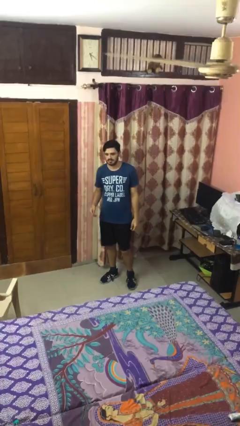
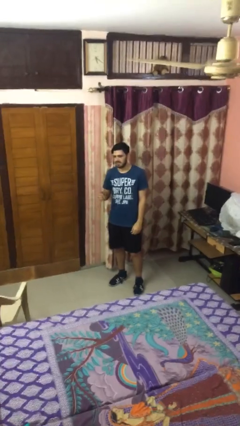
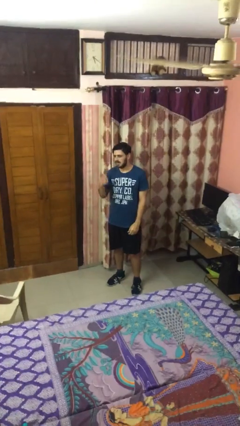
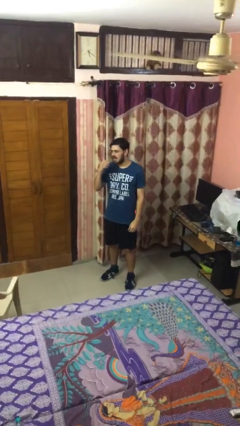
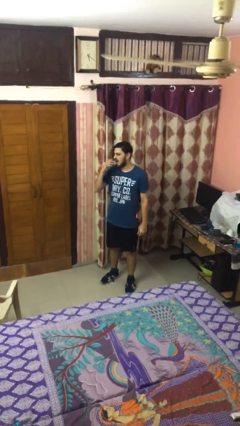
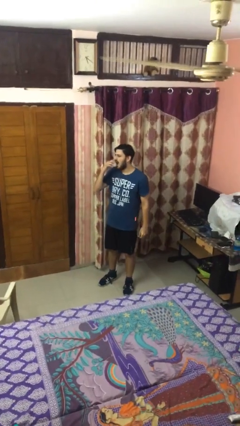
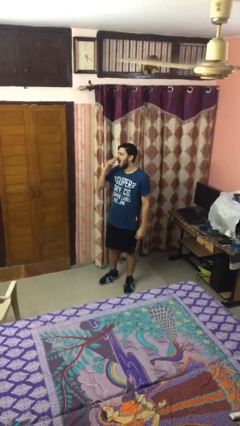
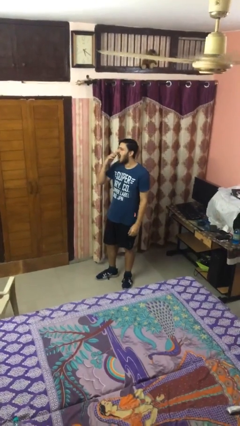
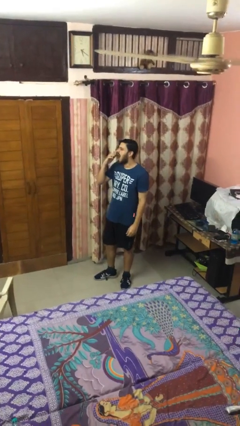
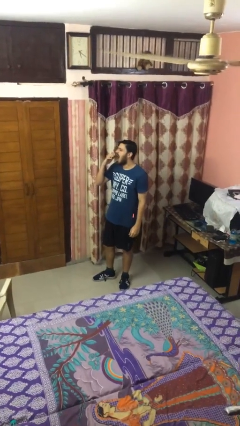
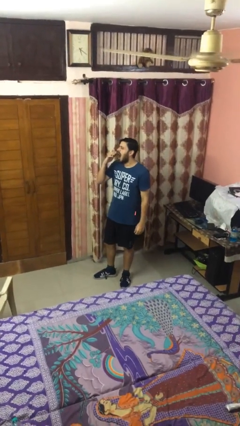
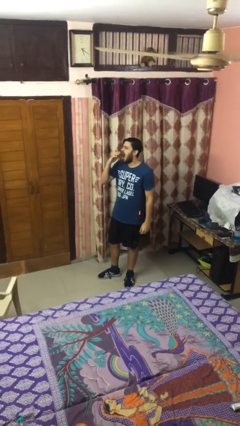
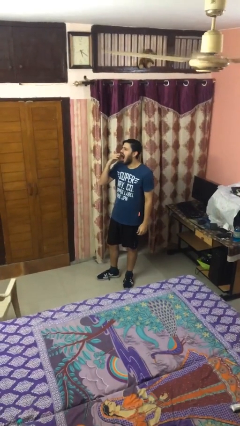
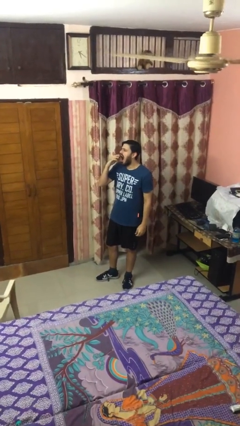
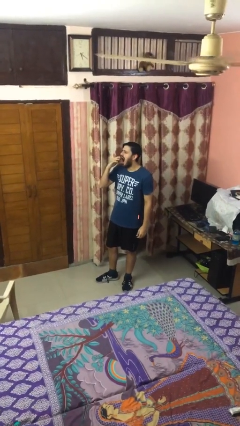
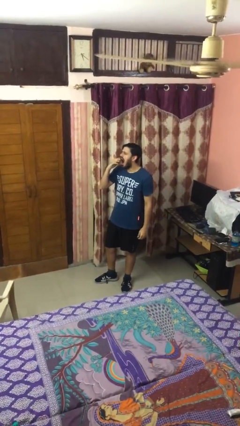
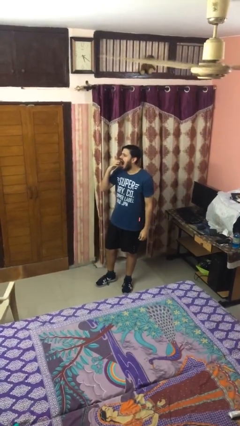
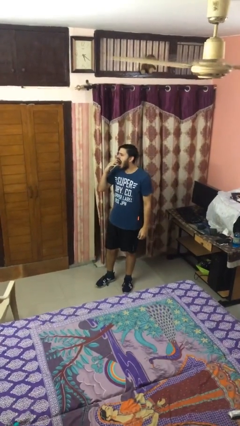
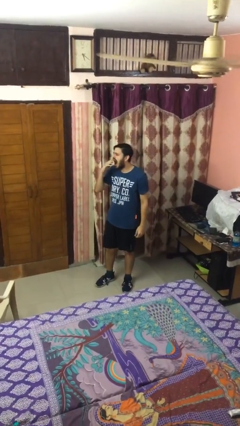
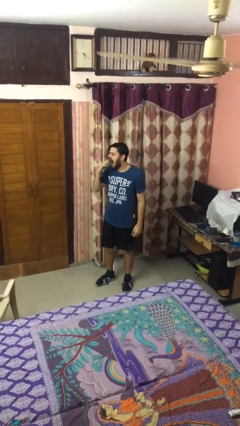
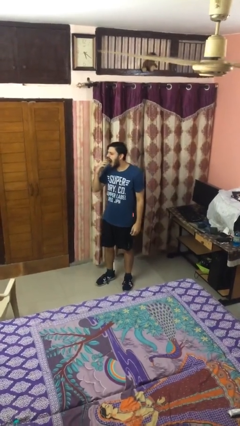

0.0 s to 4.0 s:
person yawns

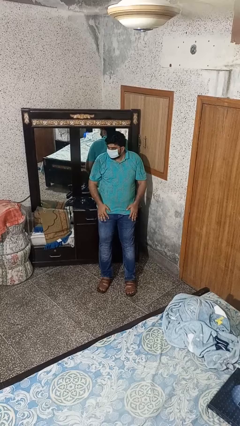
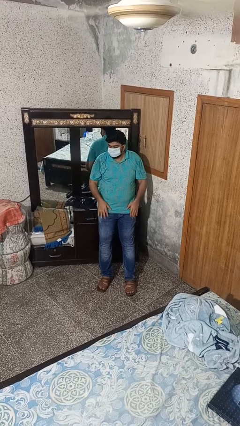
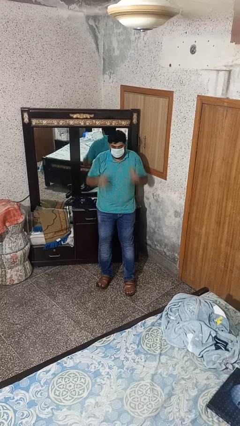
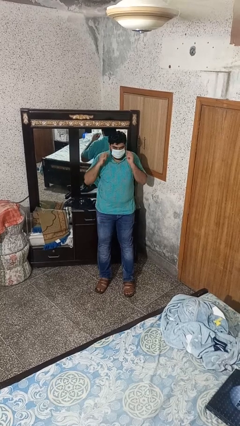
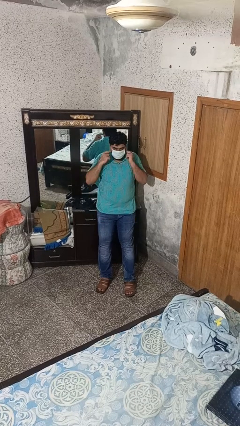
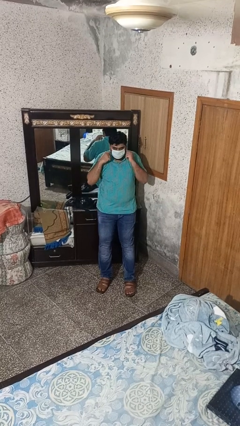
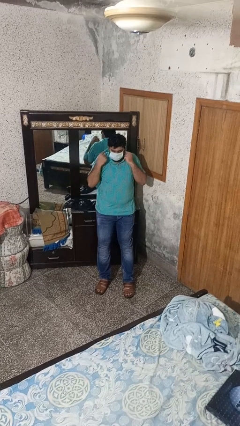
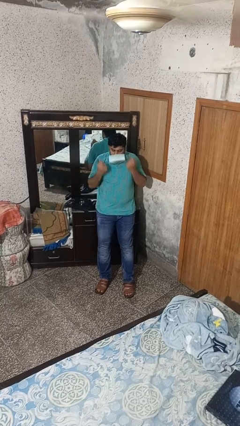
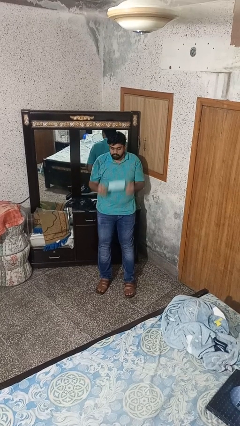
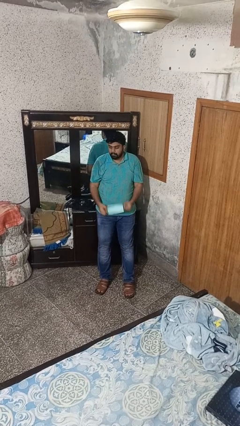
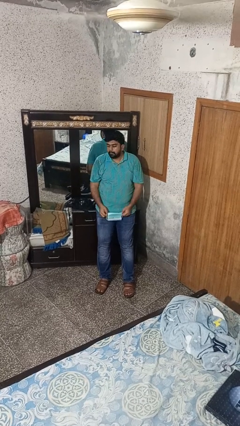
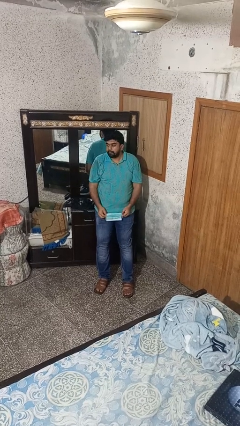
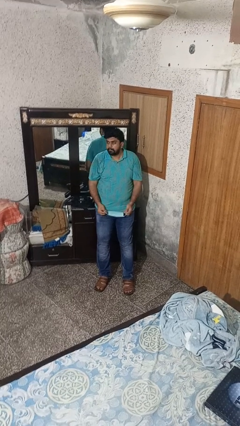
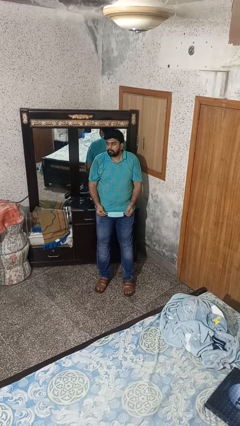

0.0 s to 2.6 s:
person takes off facemask

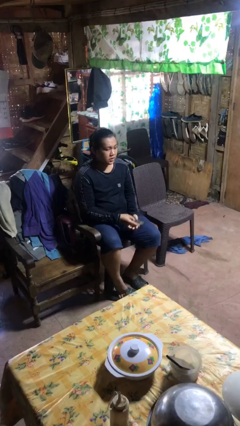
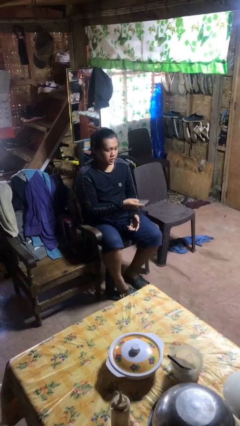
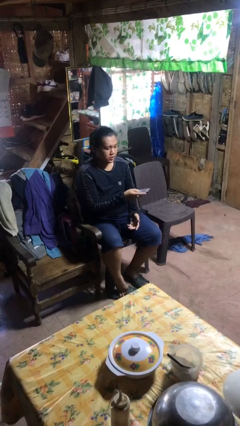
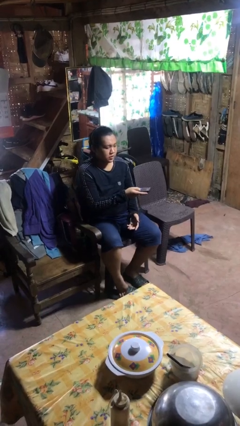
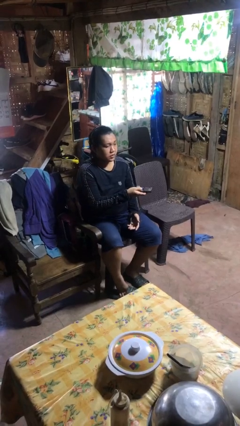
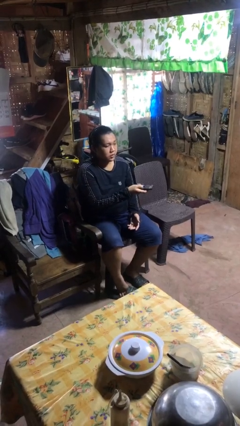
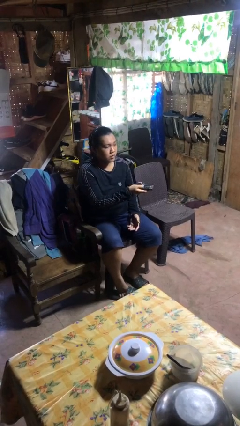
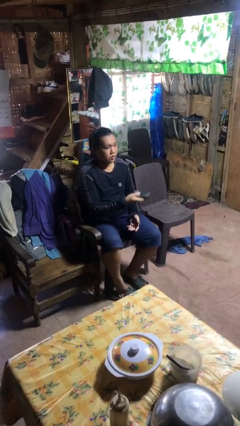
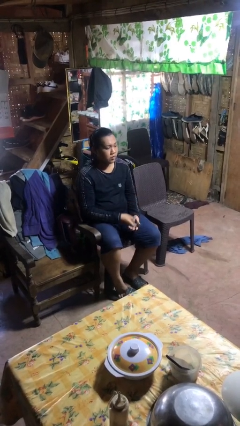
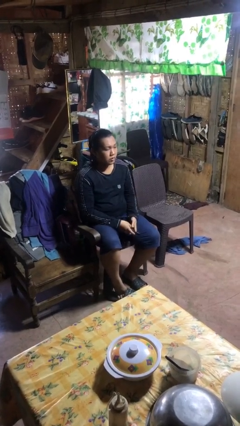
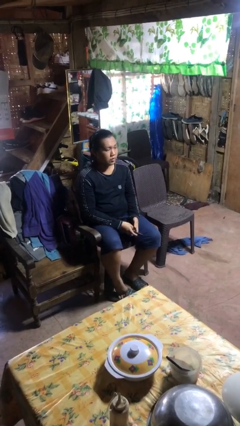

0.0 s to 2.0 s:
person uses television remote

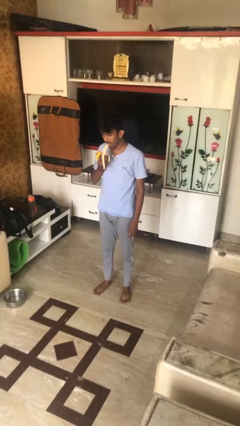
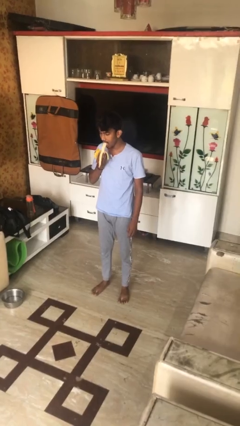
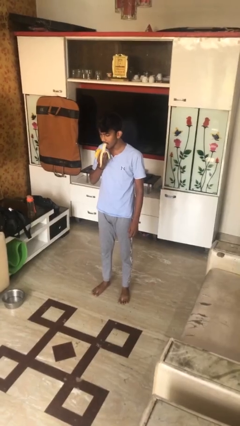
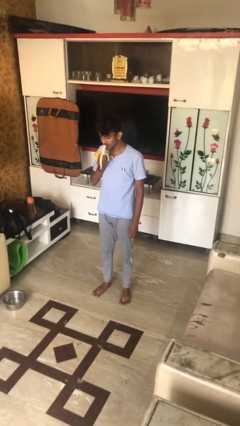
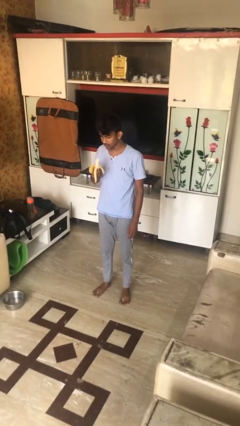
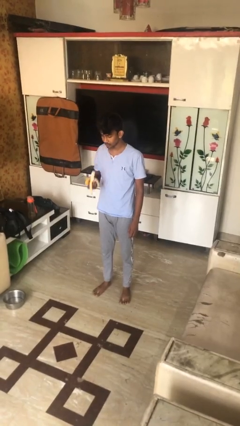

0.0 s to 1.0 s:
person eats banana

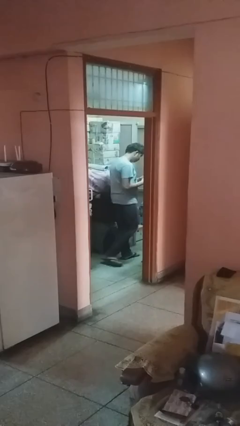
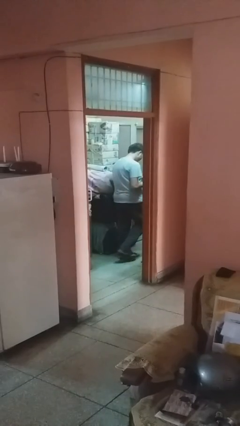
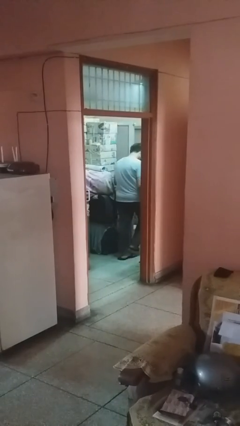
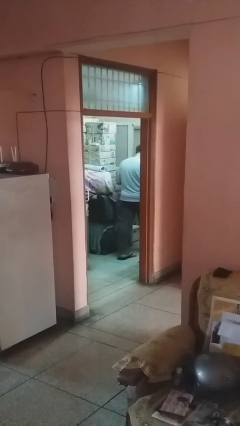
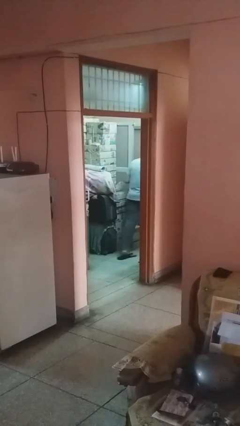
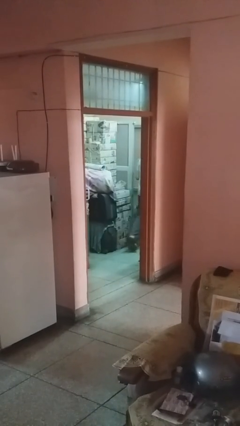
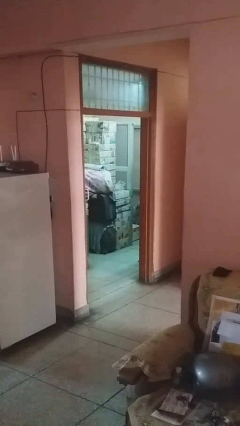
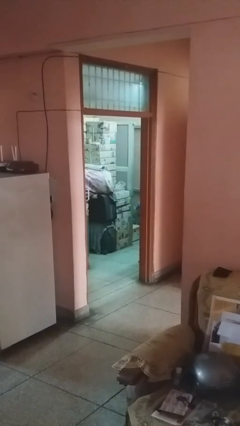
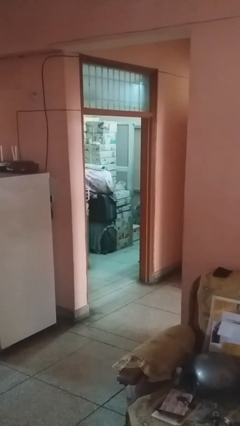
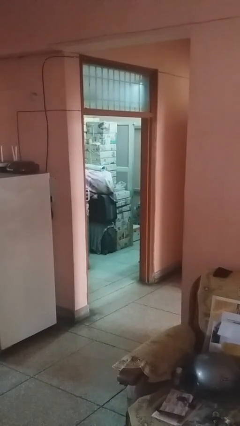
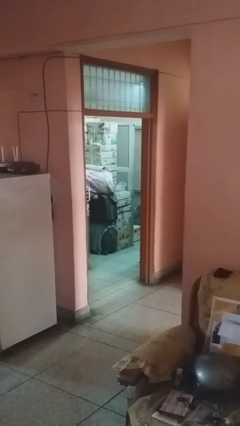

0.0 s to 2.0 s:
person exits scene through structure

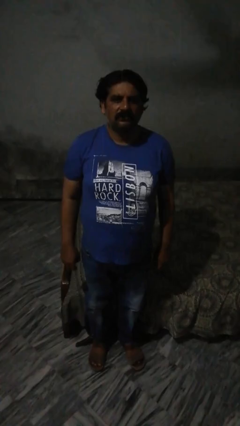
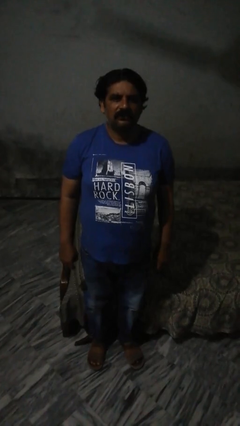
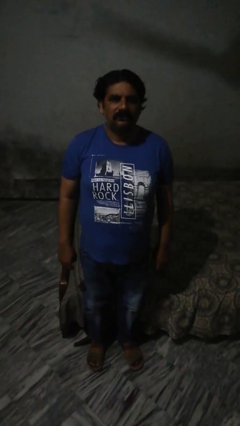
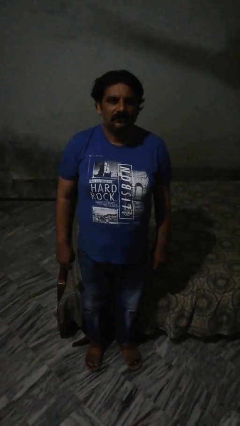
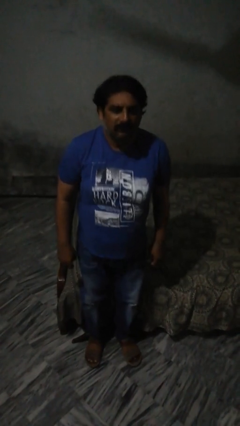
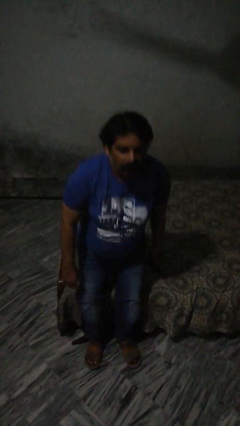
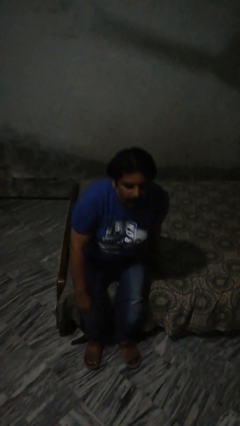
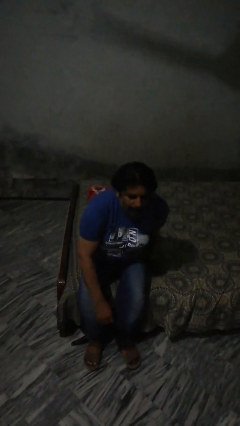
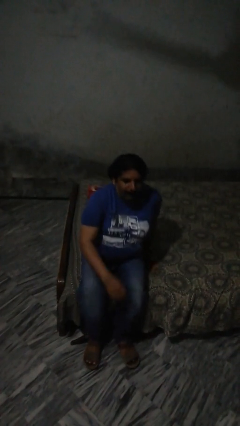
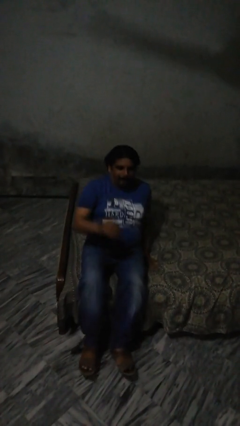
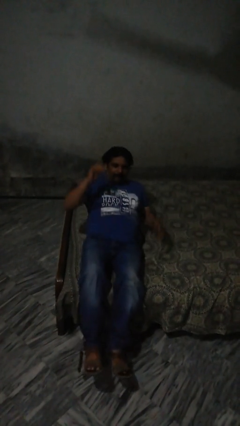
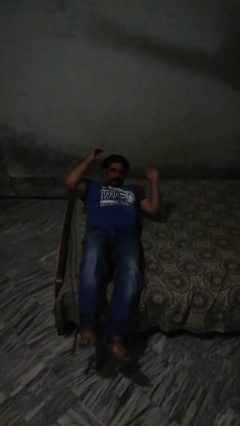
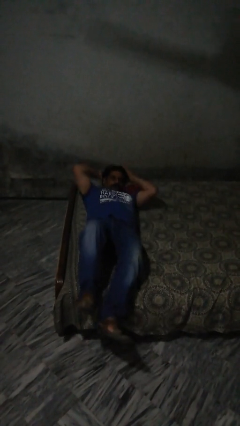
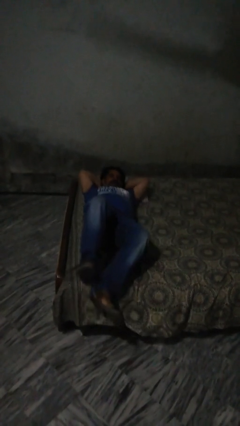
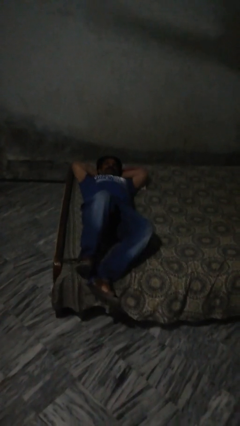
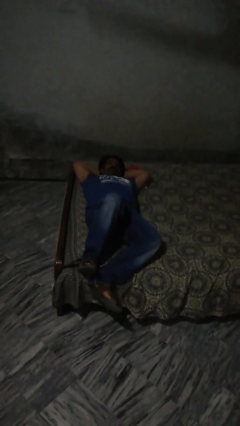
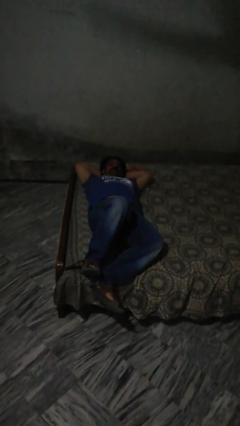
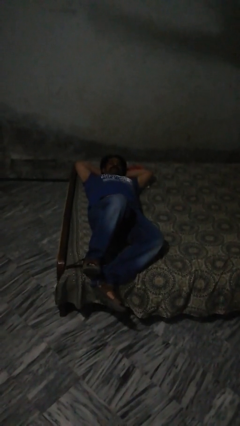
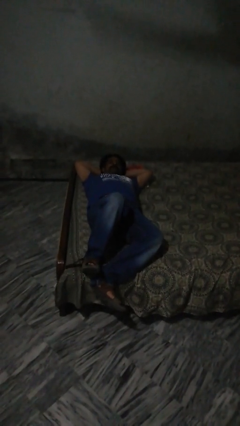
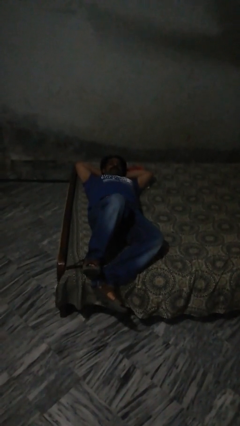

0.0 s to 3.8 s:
person lies down on bed

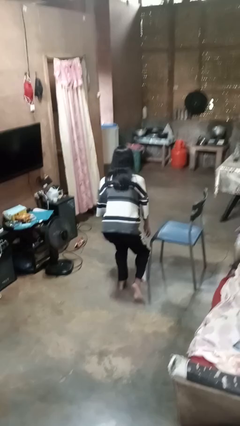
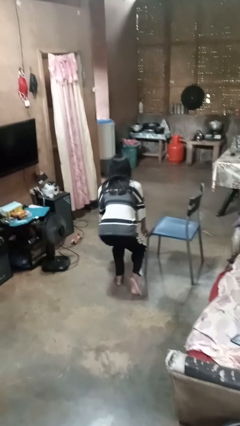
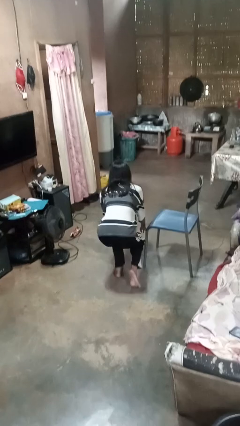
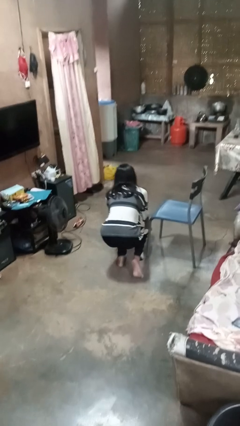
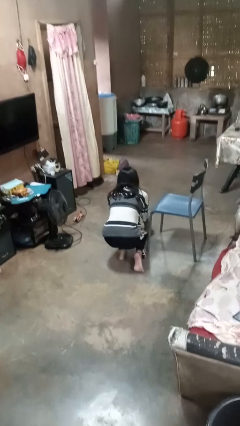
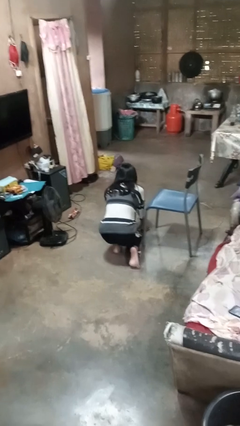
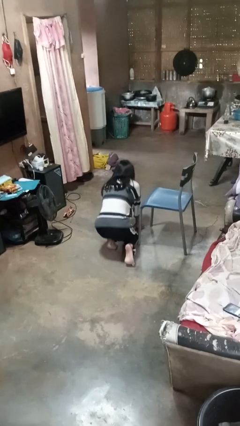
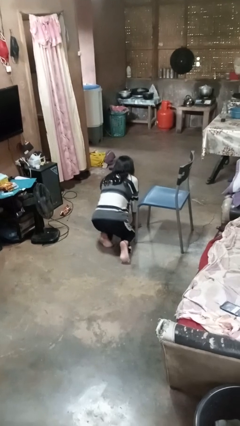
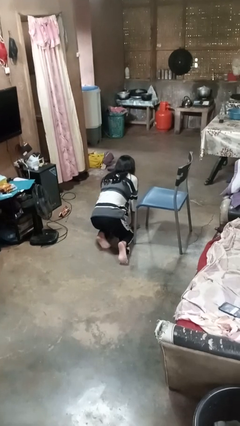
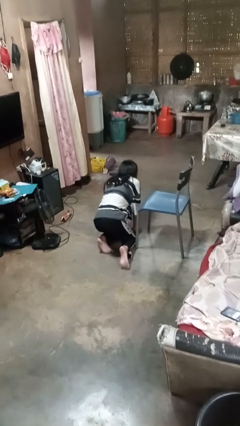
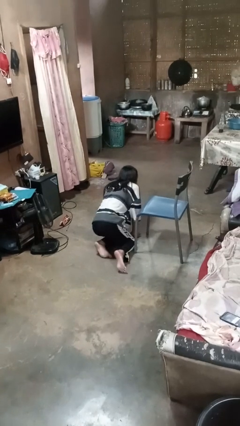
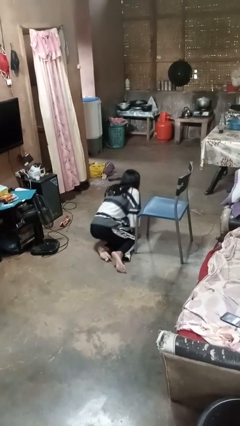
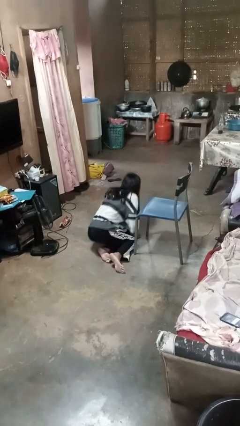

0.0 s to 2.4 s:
person trips on object on floor
